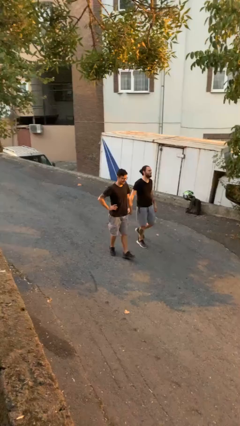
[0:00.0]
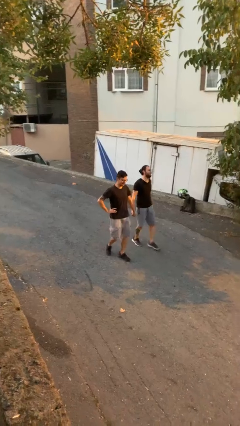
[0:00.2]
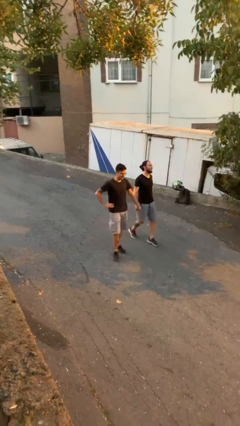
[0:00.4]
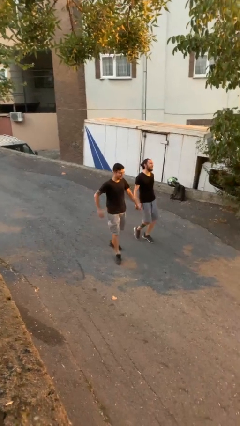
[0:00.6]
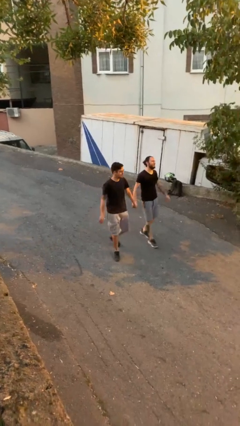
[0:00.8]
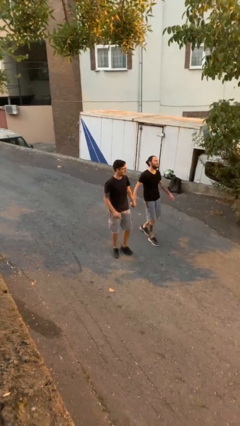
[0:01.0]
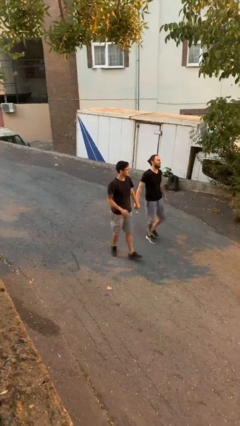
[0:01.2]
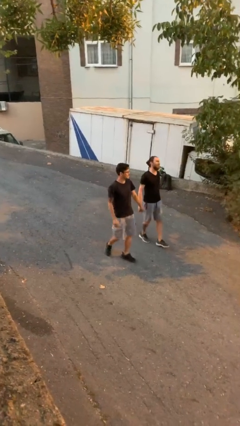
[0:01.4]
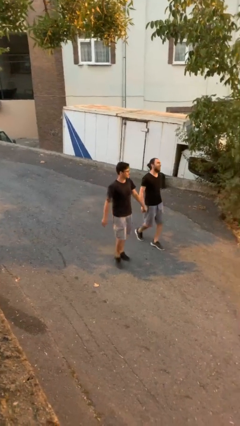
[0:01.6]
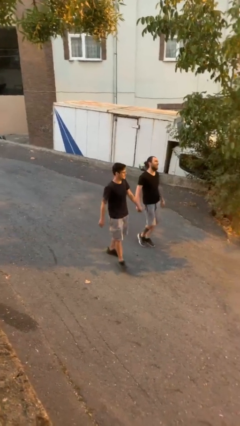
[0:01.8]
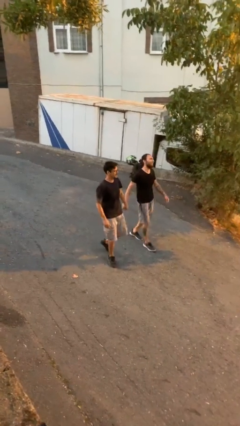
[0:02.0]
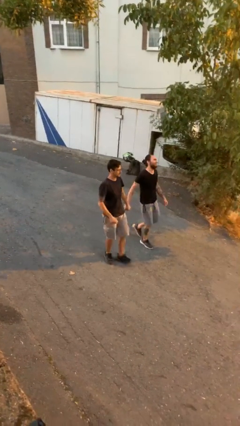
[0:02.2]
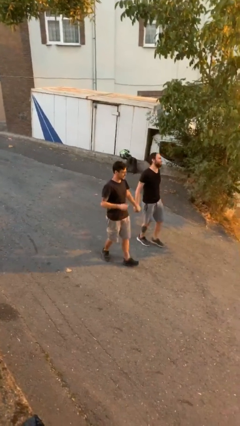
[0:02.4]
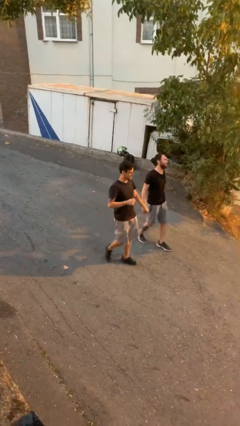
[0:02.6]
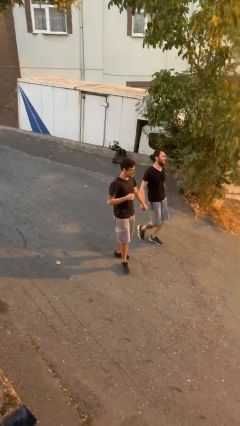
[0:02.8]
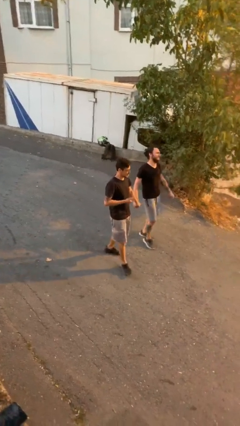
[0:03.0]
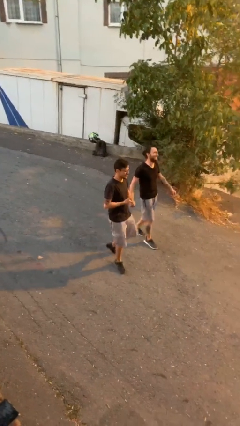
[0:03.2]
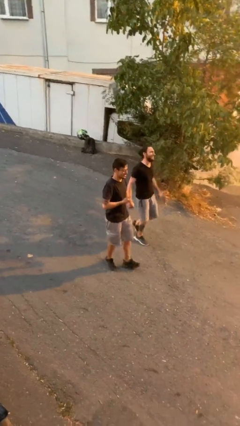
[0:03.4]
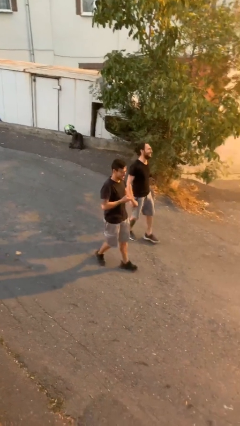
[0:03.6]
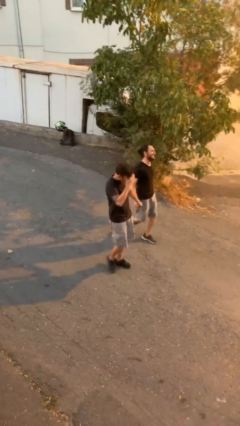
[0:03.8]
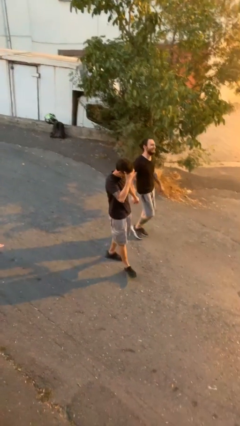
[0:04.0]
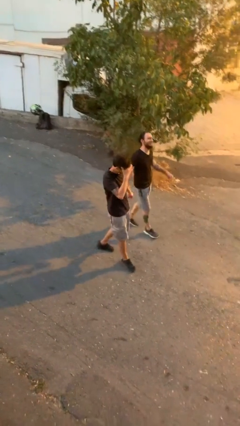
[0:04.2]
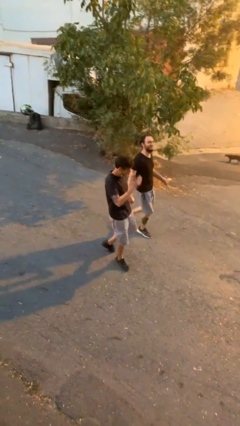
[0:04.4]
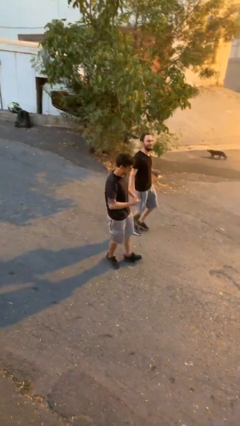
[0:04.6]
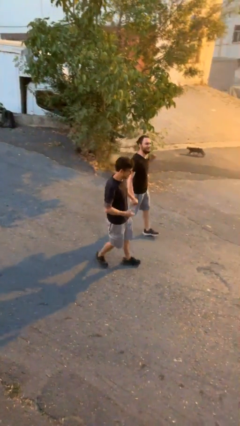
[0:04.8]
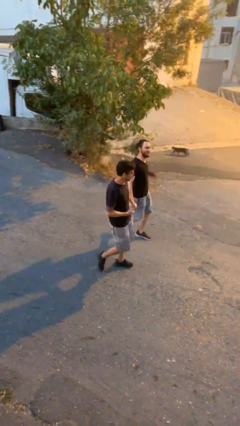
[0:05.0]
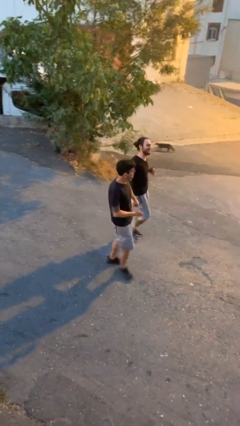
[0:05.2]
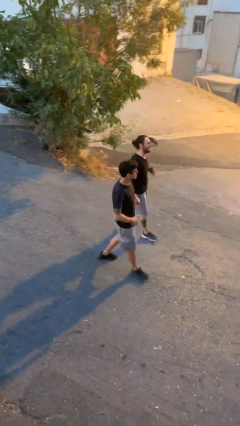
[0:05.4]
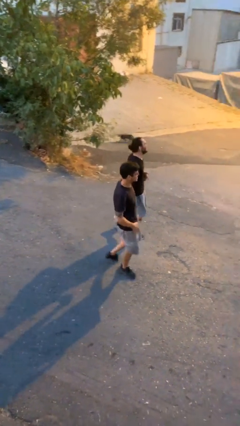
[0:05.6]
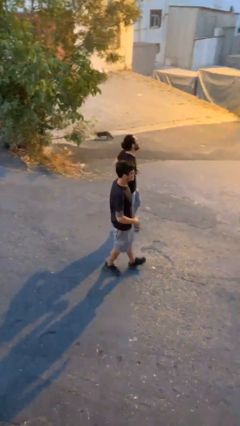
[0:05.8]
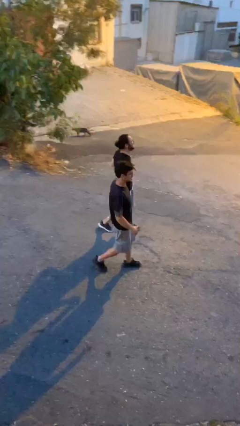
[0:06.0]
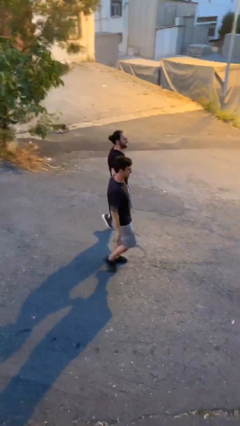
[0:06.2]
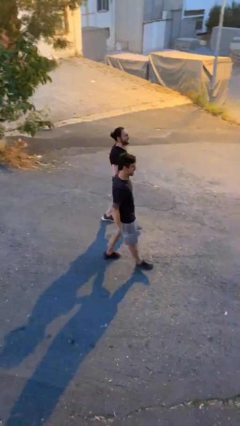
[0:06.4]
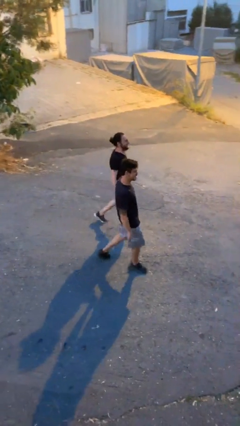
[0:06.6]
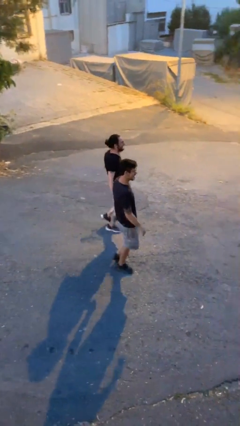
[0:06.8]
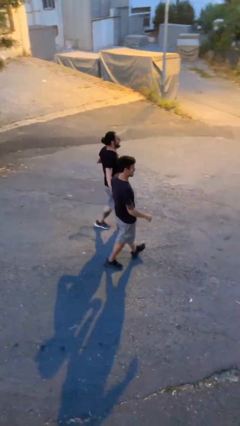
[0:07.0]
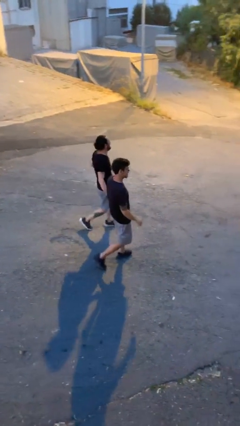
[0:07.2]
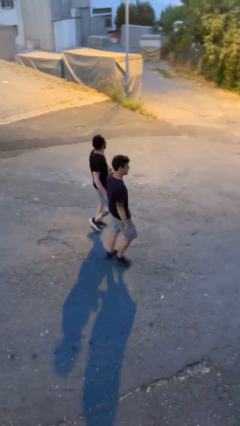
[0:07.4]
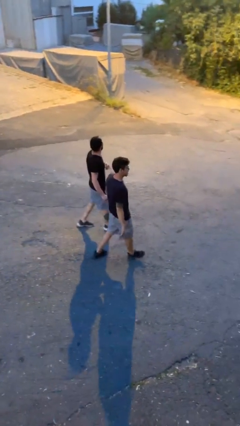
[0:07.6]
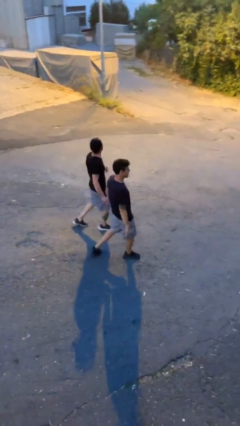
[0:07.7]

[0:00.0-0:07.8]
person holds hand

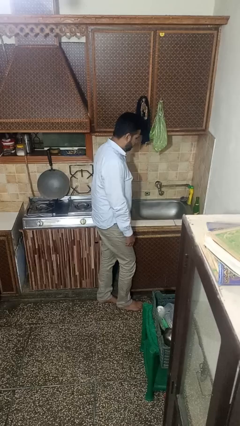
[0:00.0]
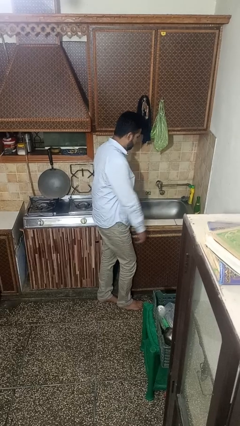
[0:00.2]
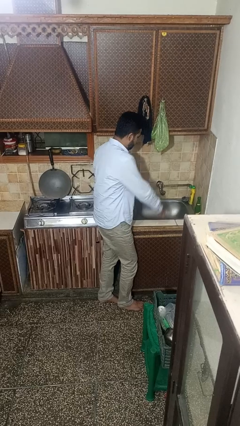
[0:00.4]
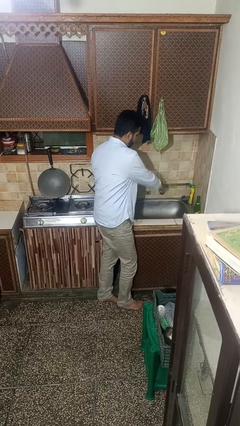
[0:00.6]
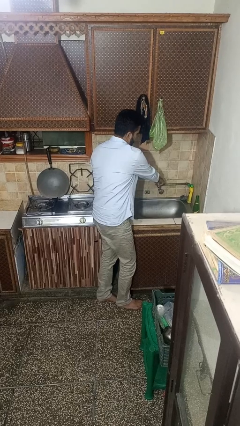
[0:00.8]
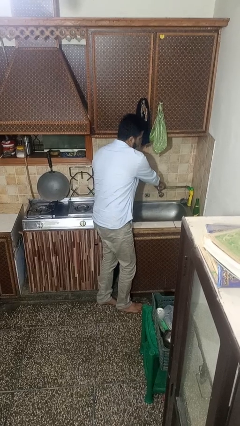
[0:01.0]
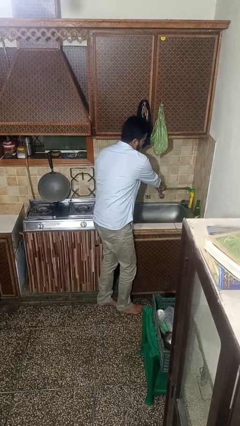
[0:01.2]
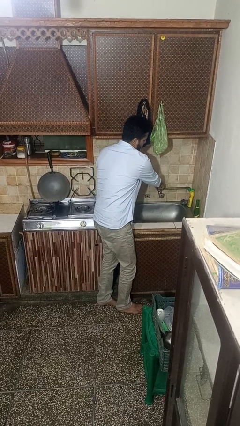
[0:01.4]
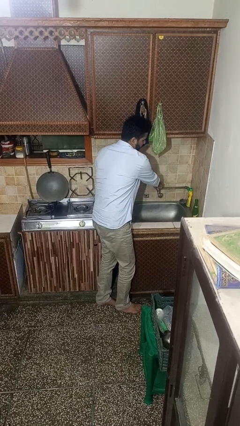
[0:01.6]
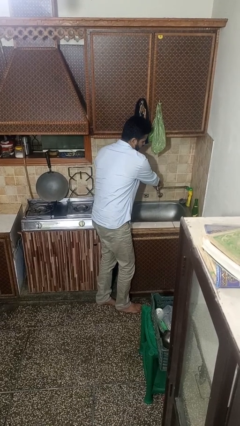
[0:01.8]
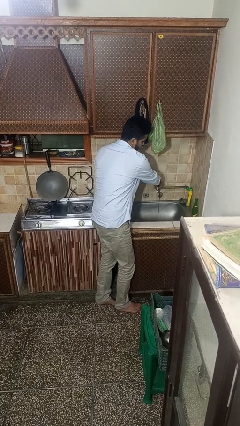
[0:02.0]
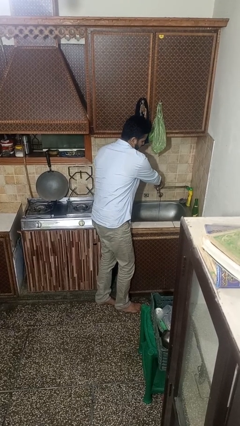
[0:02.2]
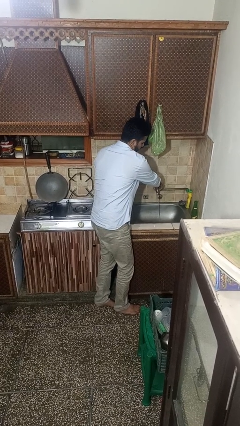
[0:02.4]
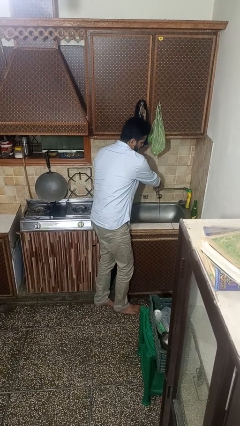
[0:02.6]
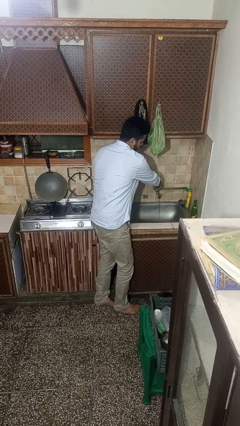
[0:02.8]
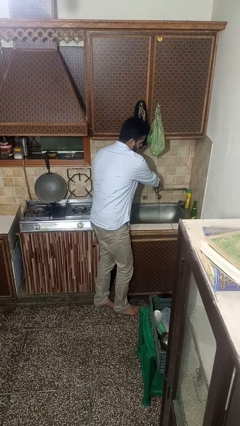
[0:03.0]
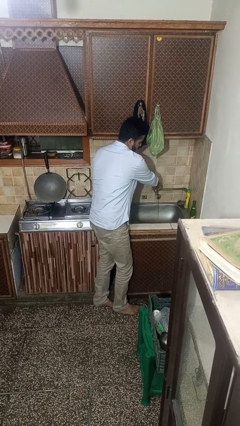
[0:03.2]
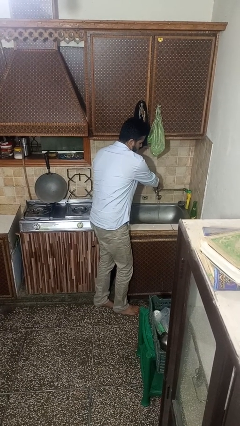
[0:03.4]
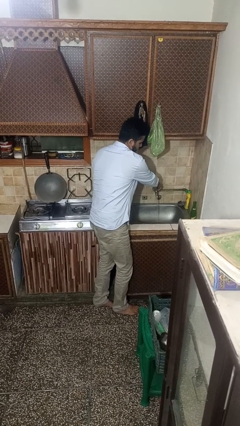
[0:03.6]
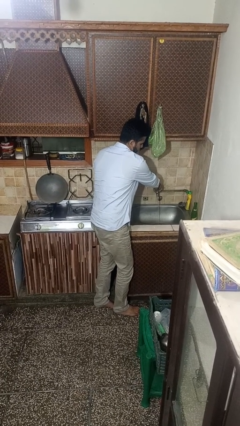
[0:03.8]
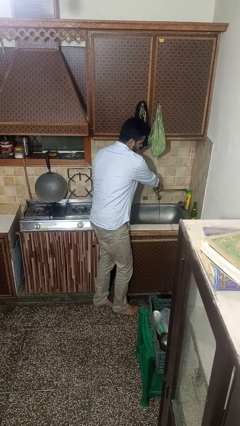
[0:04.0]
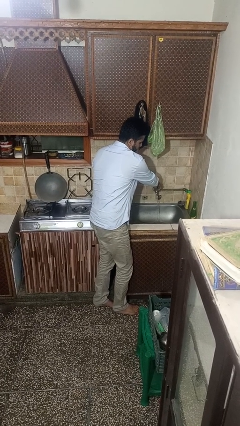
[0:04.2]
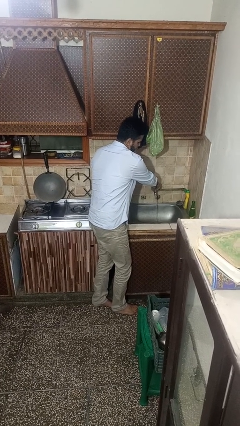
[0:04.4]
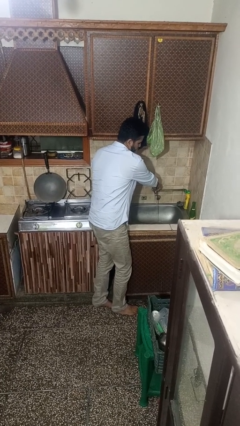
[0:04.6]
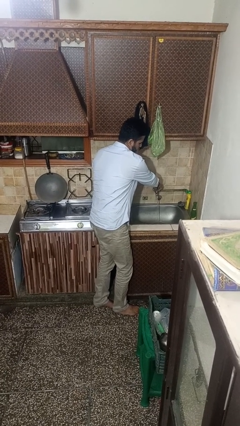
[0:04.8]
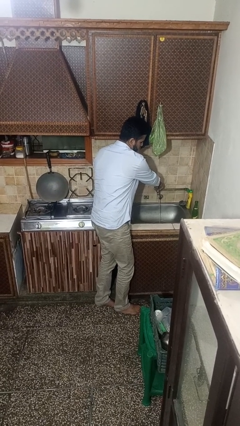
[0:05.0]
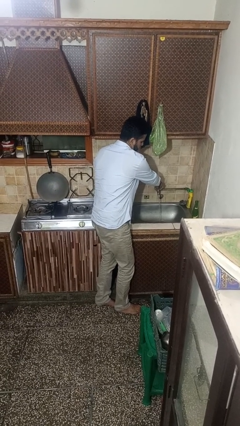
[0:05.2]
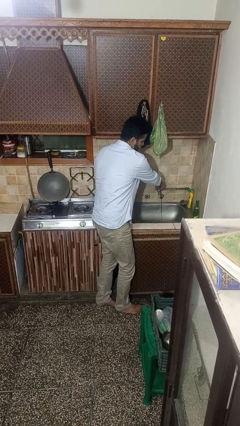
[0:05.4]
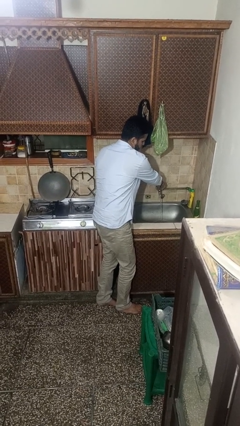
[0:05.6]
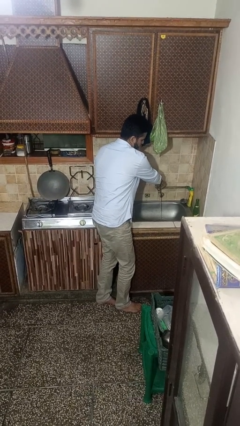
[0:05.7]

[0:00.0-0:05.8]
person turns on faucet

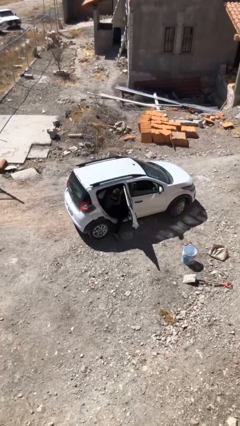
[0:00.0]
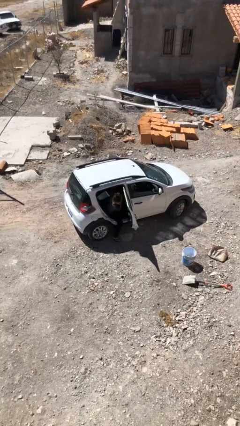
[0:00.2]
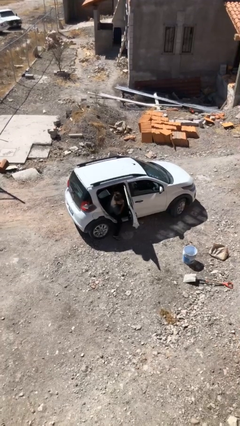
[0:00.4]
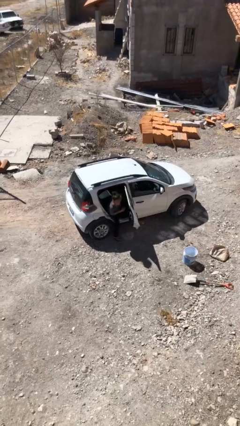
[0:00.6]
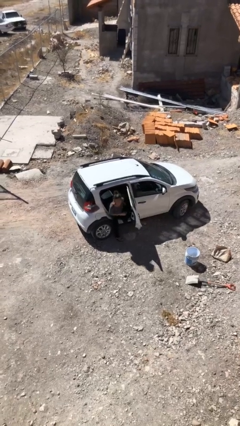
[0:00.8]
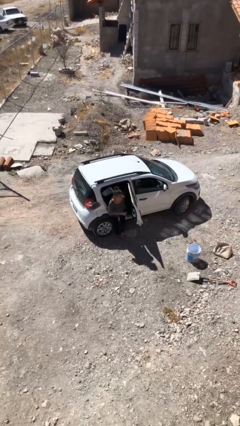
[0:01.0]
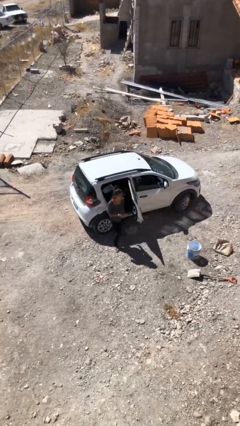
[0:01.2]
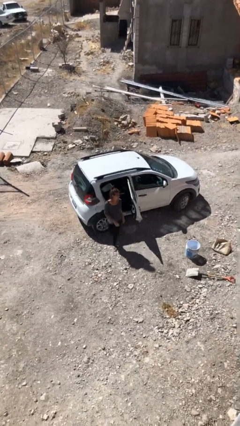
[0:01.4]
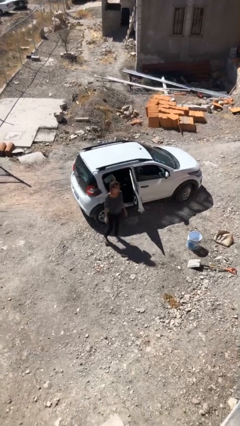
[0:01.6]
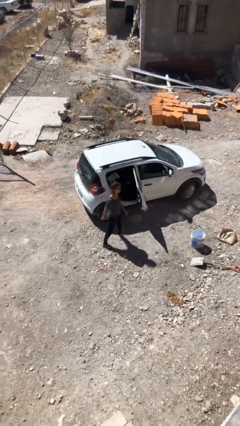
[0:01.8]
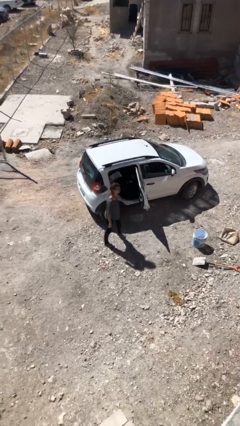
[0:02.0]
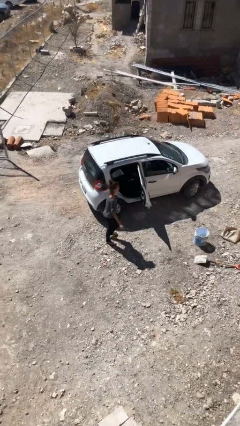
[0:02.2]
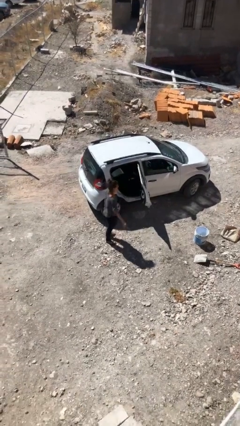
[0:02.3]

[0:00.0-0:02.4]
person exits car

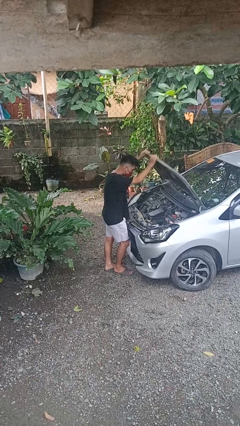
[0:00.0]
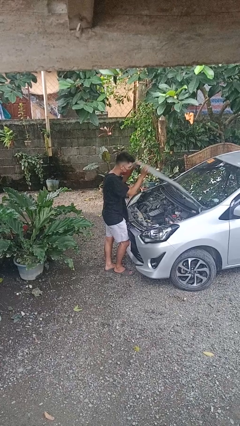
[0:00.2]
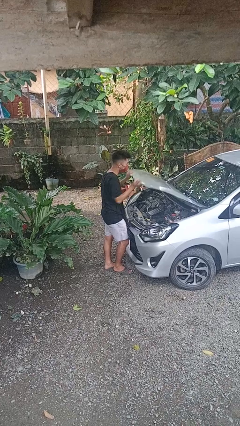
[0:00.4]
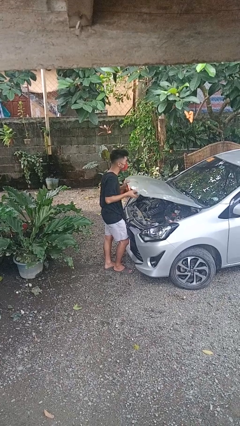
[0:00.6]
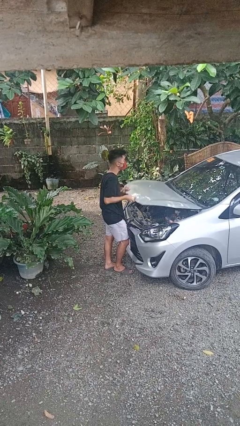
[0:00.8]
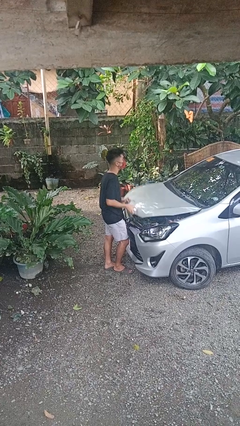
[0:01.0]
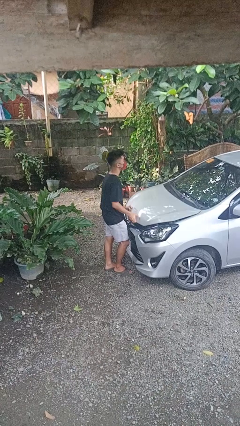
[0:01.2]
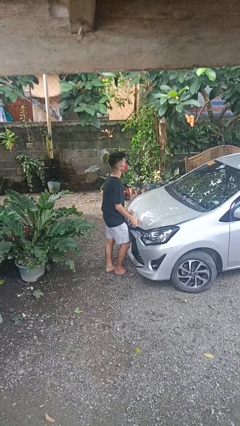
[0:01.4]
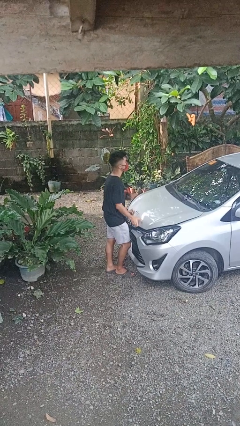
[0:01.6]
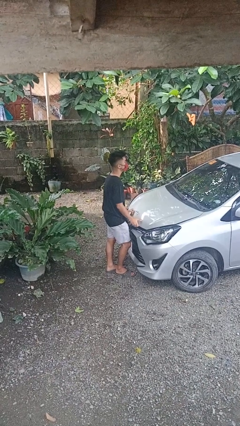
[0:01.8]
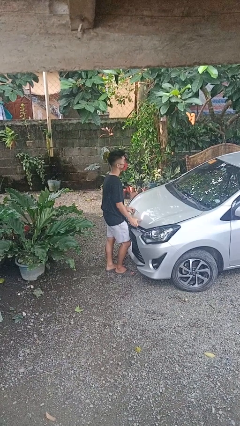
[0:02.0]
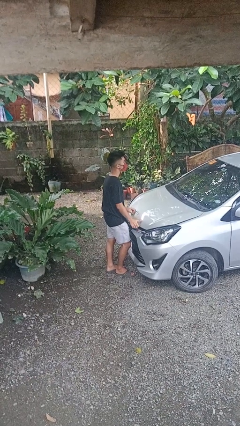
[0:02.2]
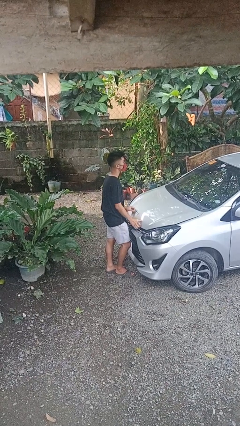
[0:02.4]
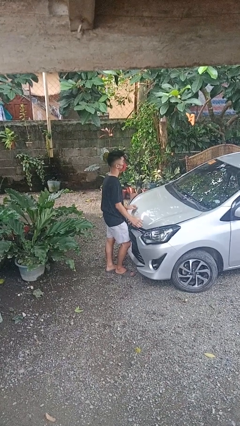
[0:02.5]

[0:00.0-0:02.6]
person closes car hood
